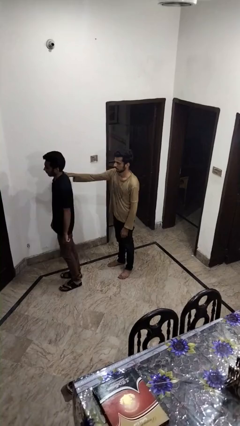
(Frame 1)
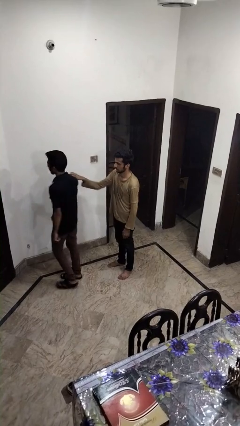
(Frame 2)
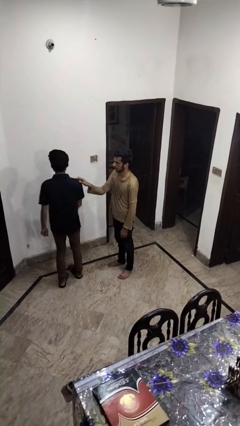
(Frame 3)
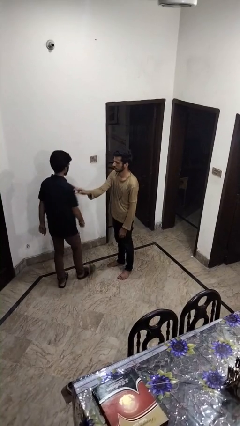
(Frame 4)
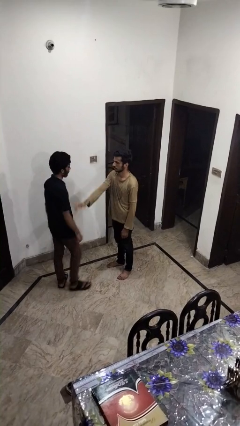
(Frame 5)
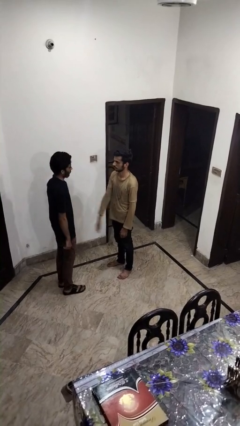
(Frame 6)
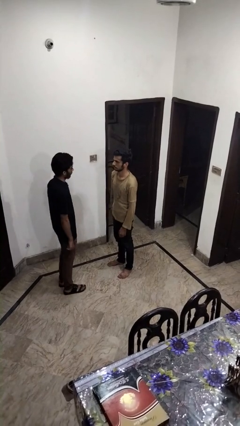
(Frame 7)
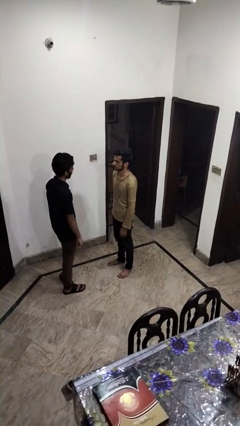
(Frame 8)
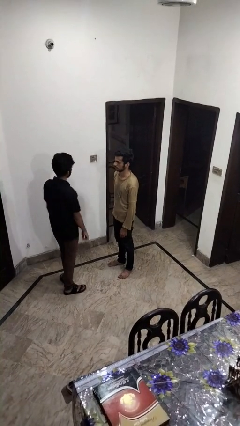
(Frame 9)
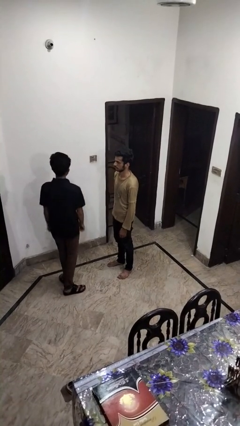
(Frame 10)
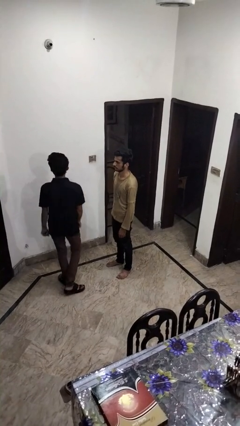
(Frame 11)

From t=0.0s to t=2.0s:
person spins person around

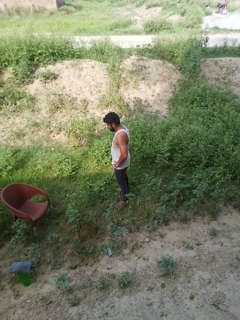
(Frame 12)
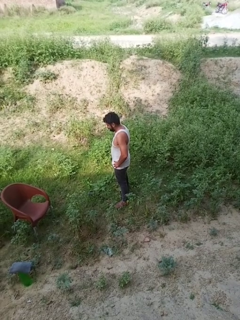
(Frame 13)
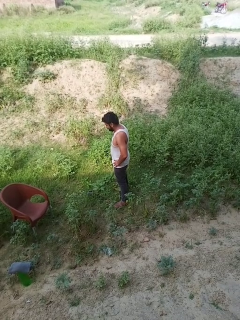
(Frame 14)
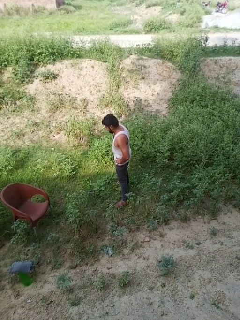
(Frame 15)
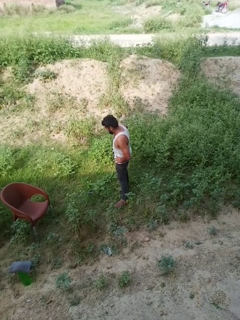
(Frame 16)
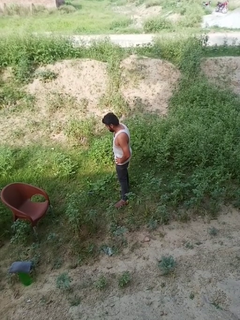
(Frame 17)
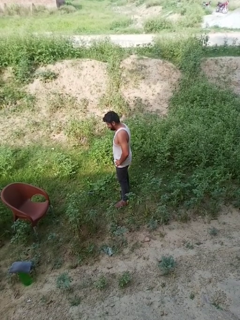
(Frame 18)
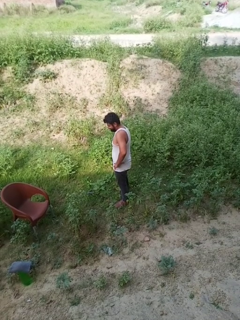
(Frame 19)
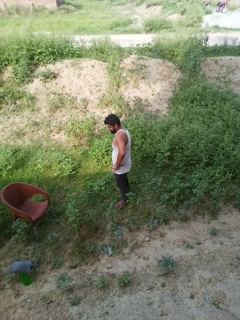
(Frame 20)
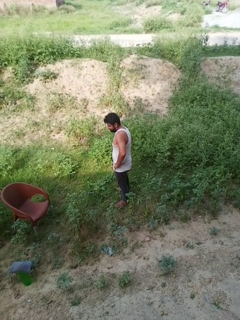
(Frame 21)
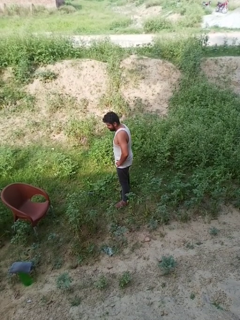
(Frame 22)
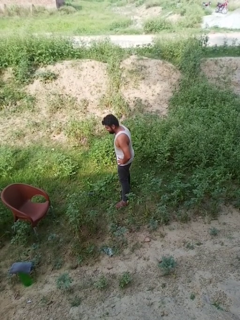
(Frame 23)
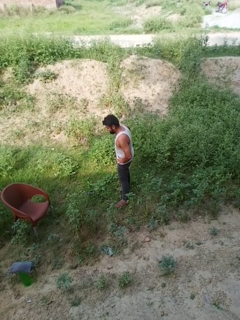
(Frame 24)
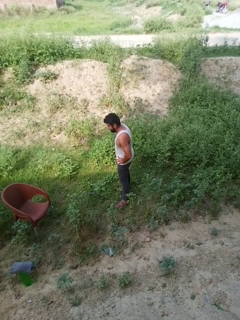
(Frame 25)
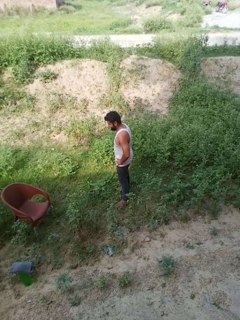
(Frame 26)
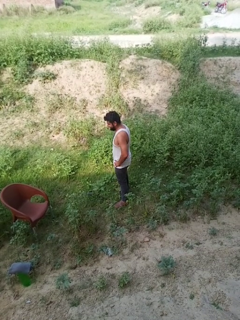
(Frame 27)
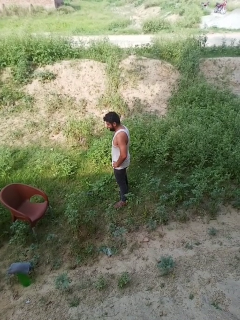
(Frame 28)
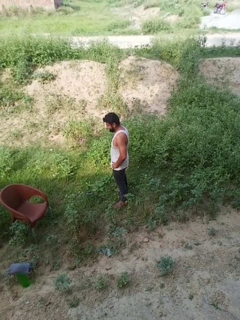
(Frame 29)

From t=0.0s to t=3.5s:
person wiggles hips

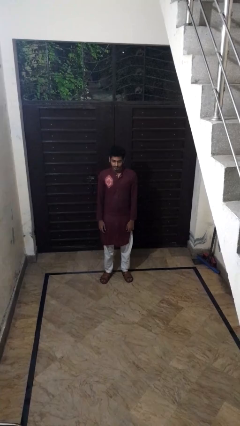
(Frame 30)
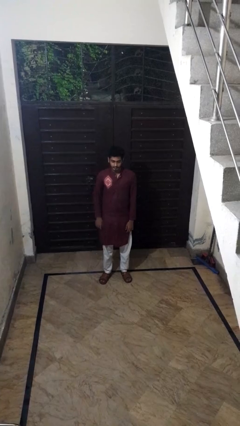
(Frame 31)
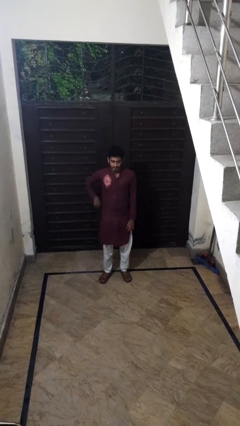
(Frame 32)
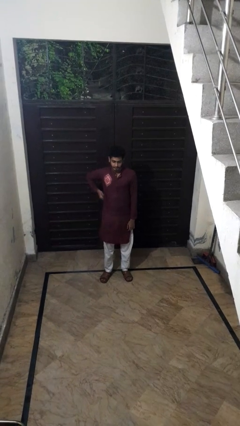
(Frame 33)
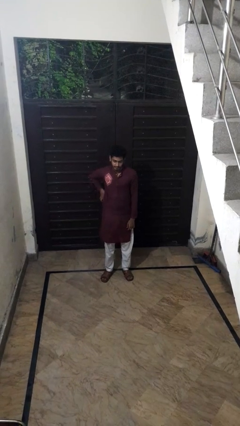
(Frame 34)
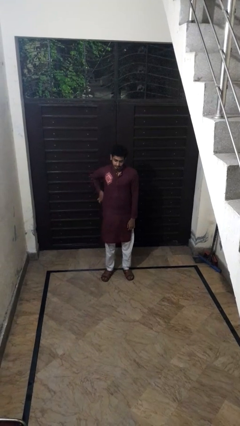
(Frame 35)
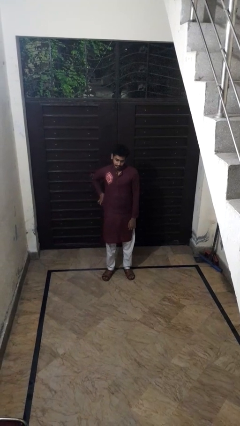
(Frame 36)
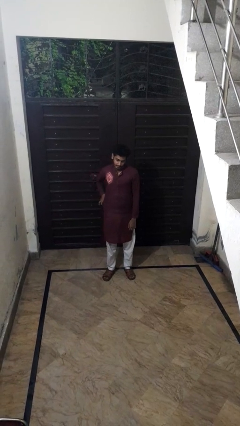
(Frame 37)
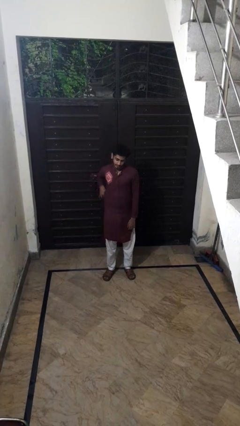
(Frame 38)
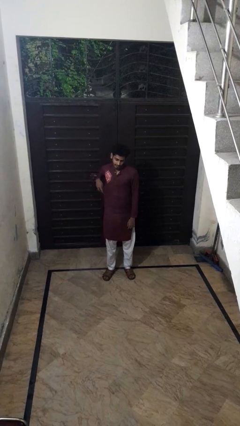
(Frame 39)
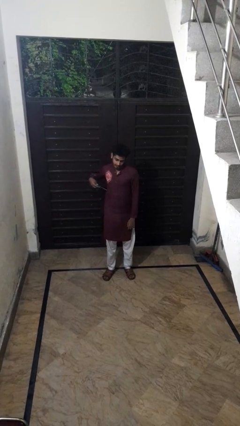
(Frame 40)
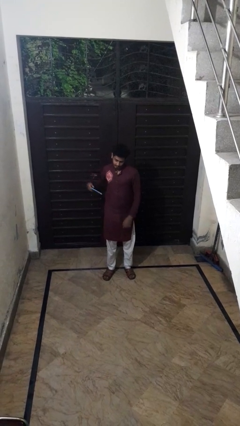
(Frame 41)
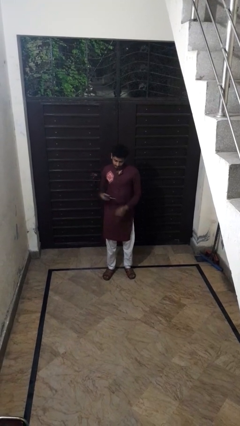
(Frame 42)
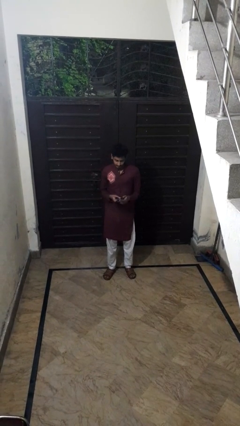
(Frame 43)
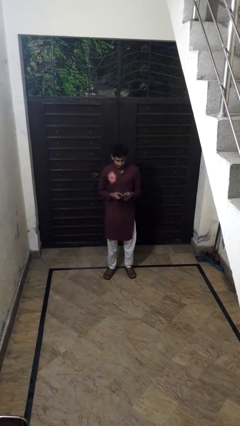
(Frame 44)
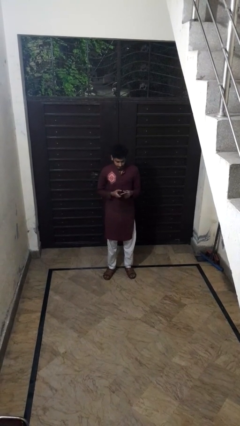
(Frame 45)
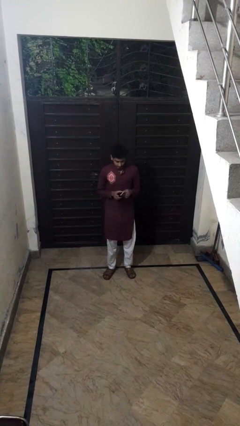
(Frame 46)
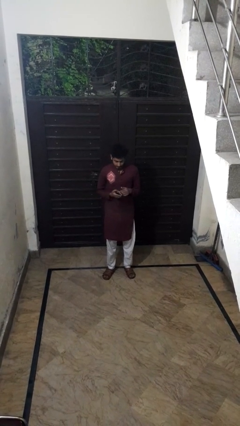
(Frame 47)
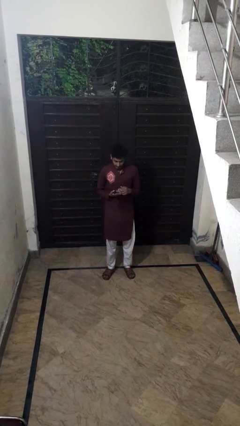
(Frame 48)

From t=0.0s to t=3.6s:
person takes phone from pocket
